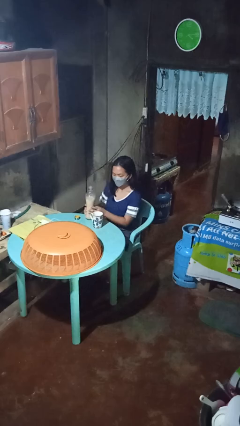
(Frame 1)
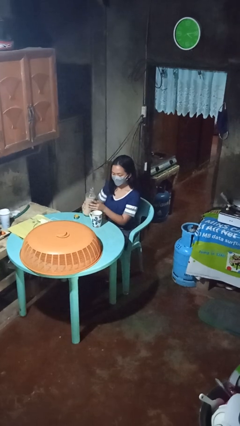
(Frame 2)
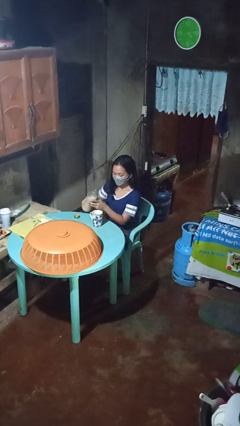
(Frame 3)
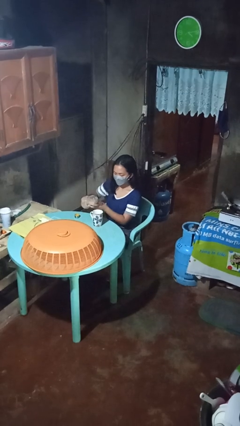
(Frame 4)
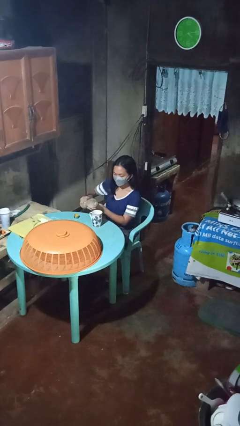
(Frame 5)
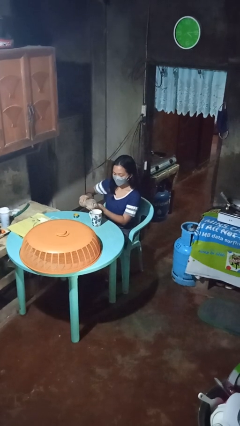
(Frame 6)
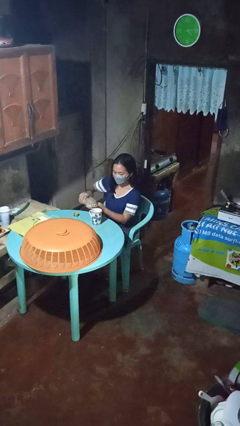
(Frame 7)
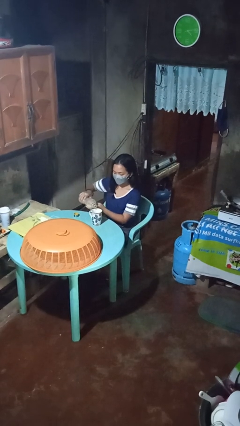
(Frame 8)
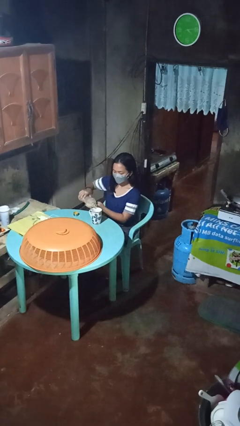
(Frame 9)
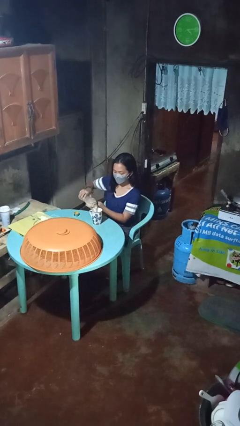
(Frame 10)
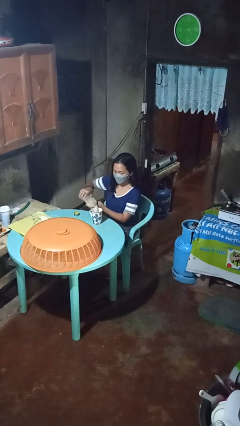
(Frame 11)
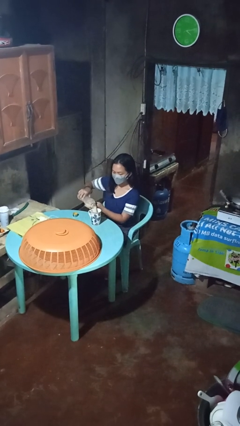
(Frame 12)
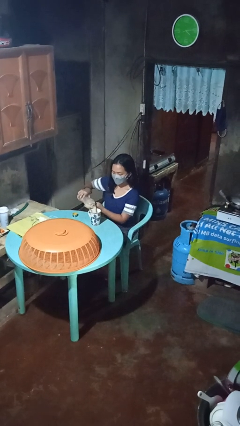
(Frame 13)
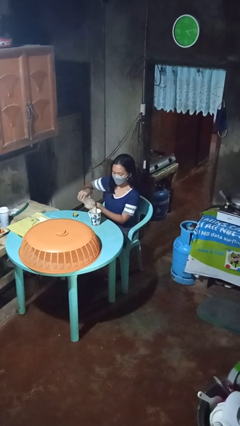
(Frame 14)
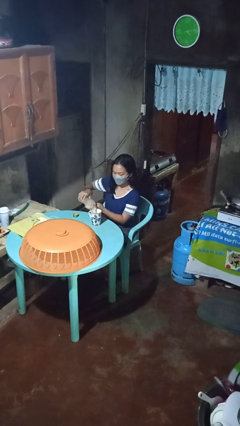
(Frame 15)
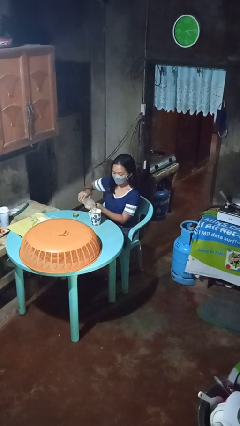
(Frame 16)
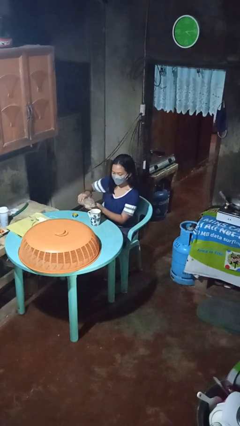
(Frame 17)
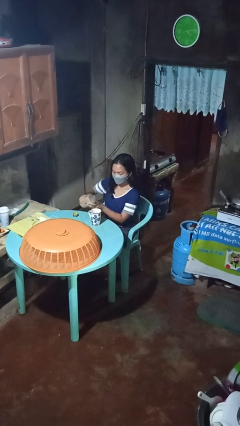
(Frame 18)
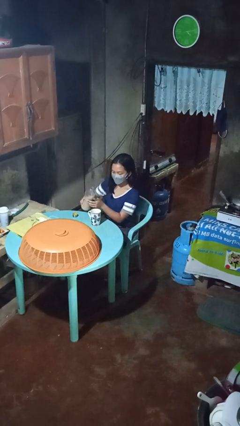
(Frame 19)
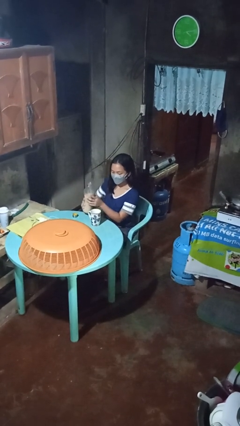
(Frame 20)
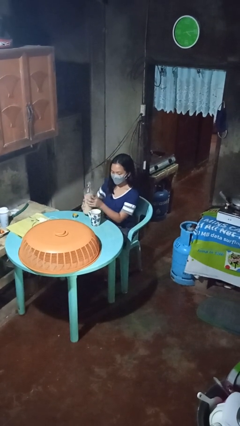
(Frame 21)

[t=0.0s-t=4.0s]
person pours coffee into mug

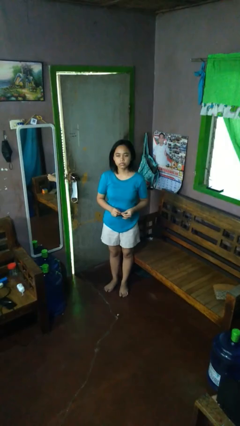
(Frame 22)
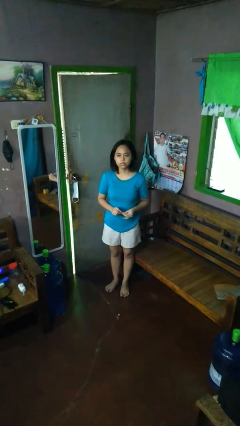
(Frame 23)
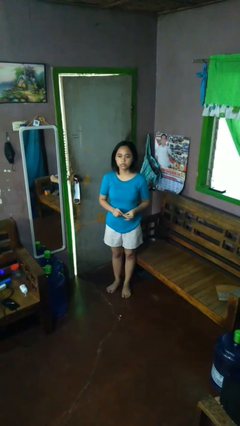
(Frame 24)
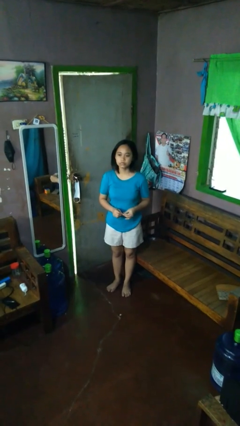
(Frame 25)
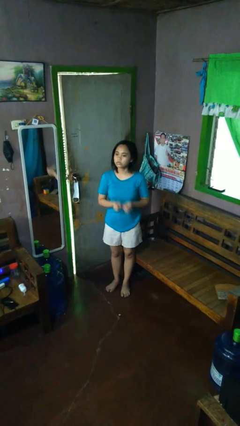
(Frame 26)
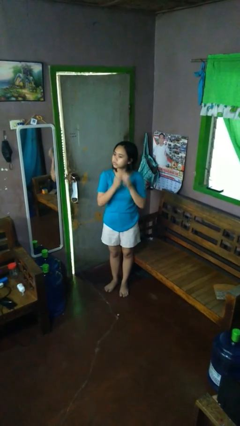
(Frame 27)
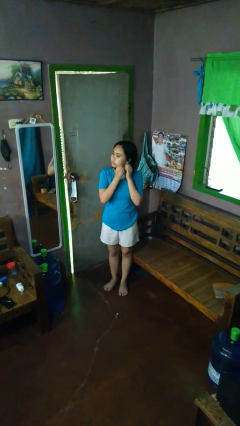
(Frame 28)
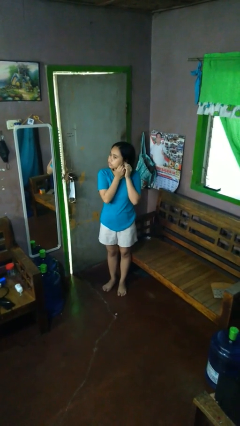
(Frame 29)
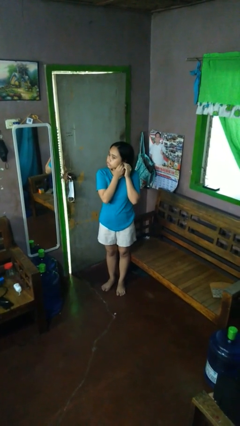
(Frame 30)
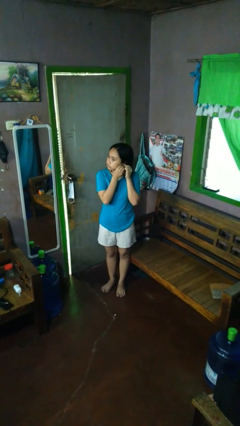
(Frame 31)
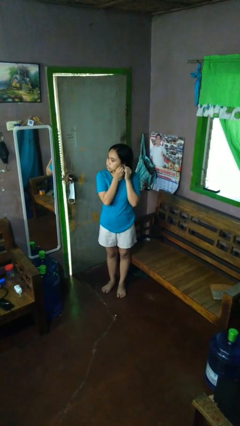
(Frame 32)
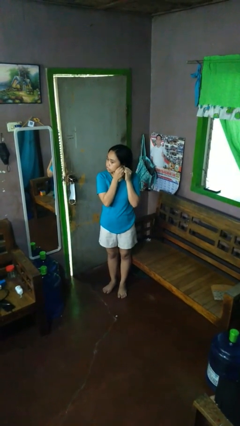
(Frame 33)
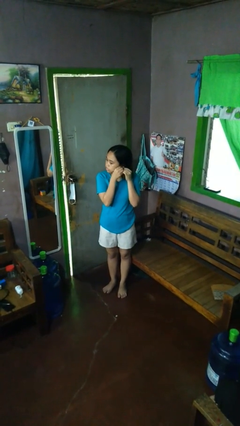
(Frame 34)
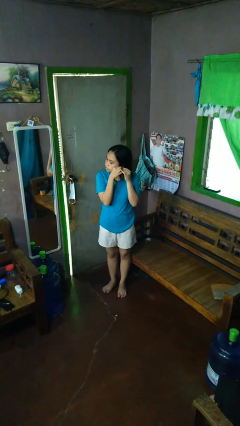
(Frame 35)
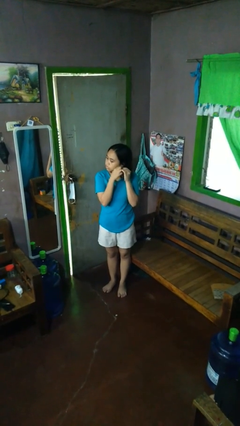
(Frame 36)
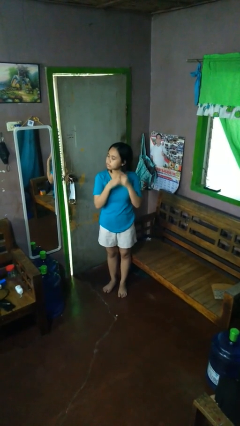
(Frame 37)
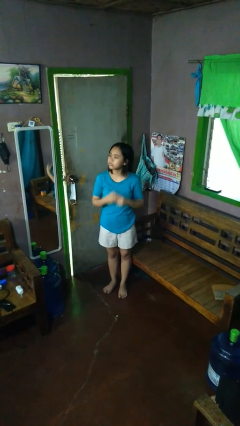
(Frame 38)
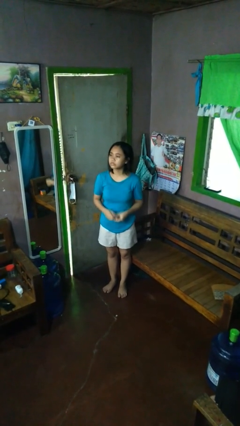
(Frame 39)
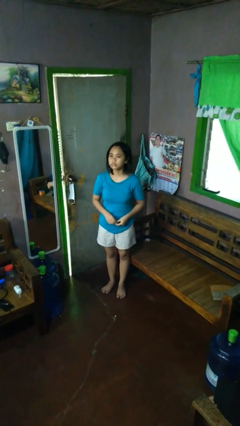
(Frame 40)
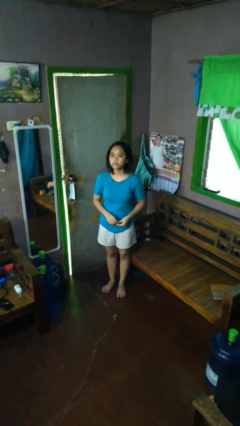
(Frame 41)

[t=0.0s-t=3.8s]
person puts on earrings

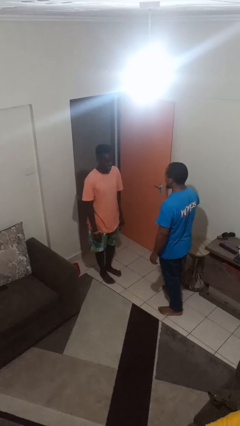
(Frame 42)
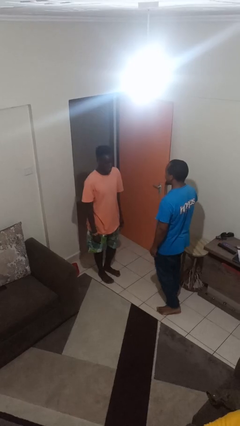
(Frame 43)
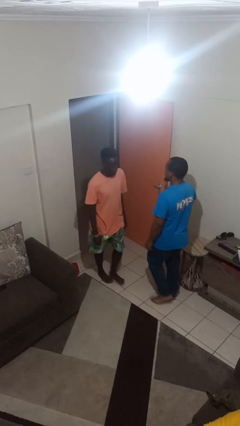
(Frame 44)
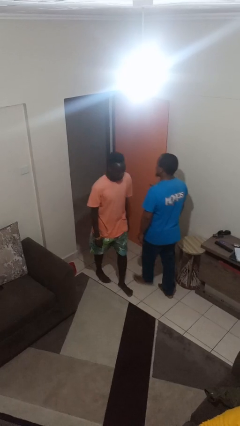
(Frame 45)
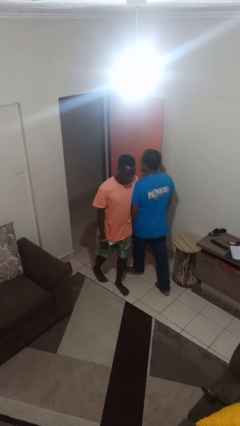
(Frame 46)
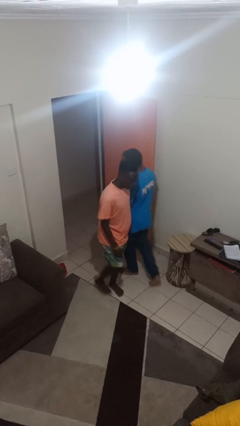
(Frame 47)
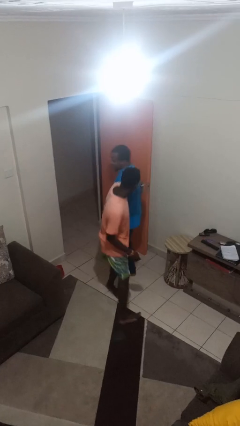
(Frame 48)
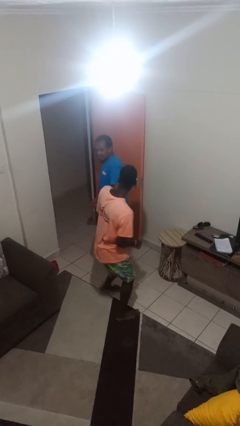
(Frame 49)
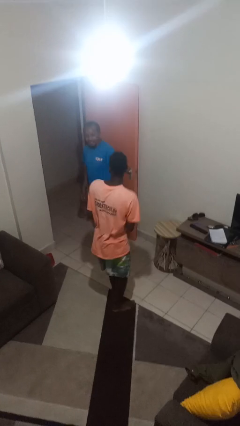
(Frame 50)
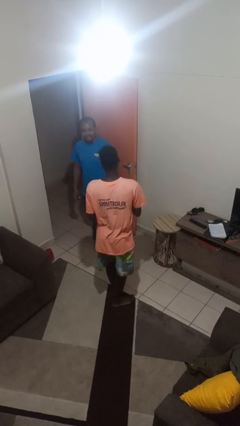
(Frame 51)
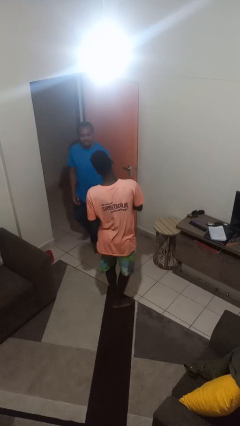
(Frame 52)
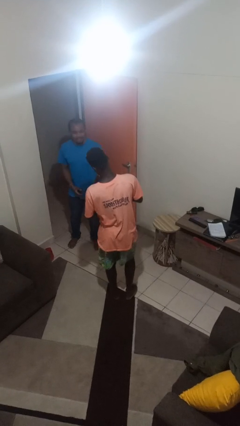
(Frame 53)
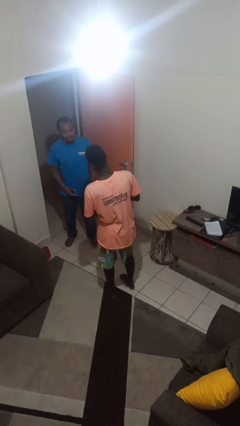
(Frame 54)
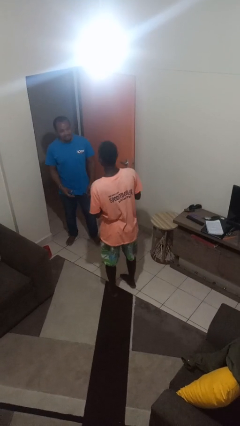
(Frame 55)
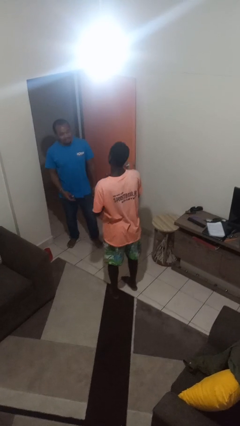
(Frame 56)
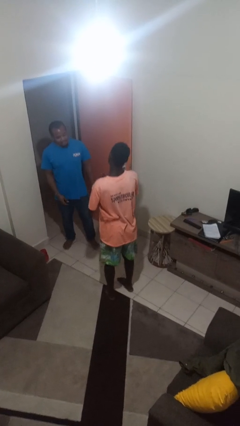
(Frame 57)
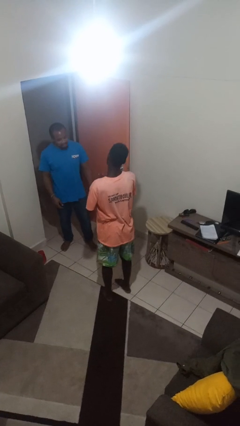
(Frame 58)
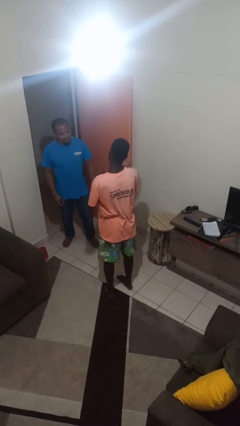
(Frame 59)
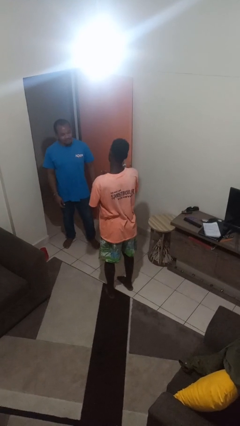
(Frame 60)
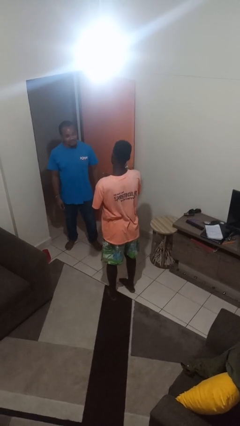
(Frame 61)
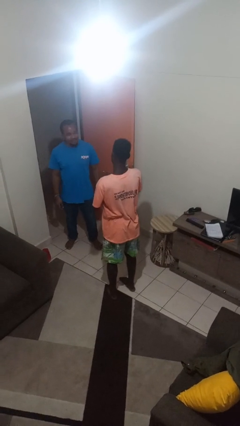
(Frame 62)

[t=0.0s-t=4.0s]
person bumps into person

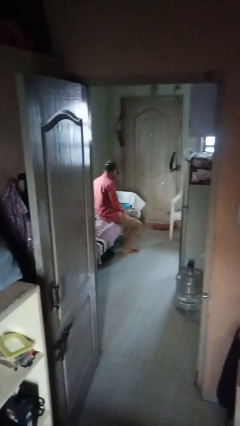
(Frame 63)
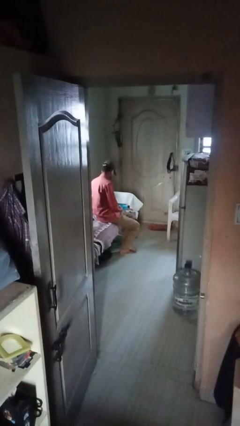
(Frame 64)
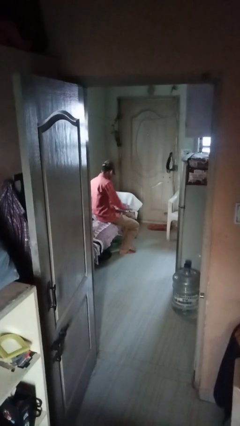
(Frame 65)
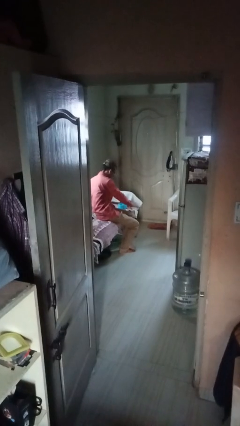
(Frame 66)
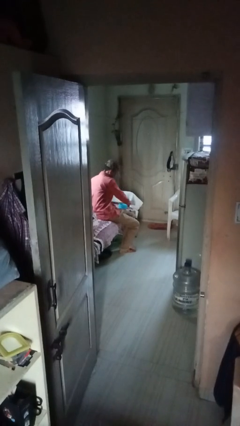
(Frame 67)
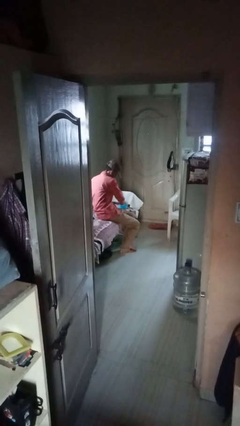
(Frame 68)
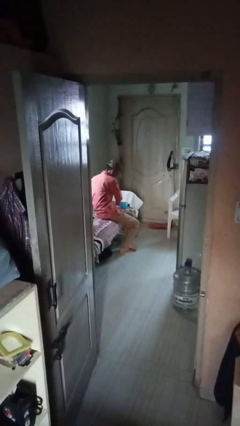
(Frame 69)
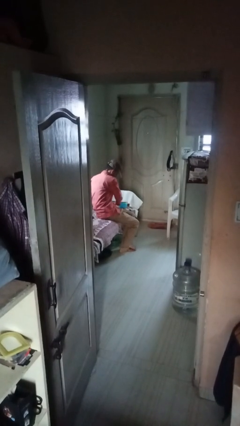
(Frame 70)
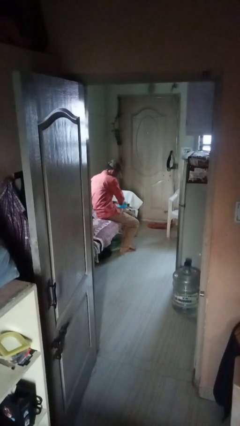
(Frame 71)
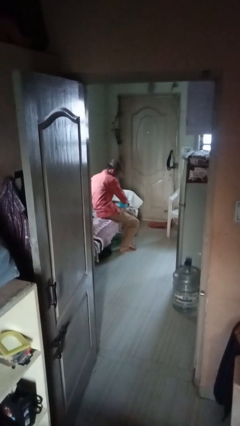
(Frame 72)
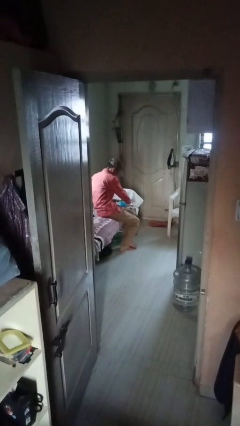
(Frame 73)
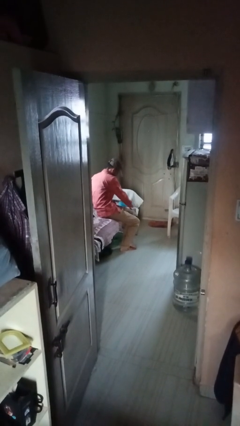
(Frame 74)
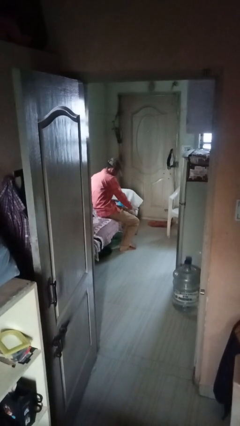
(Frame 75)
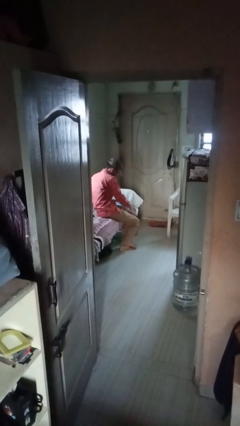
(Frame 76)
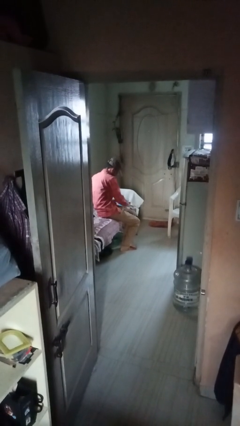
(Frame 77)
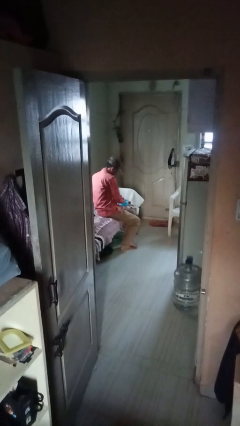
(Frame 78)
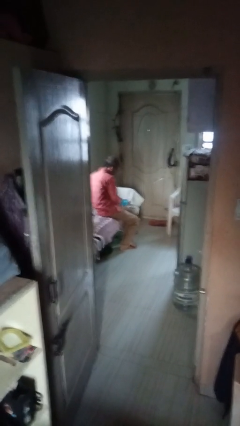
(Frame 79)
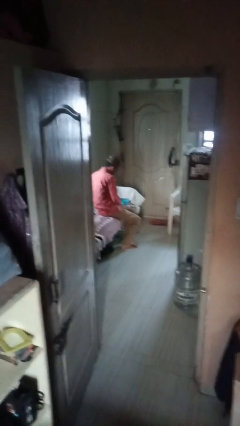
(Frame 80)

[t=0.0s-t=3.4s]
person waves hand over object

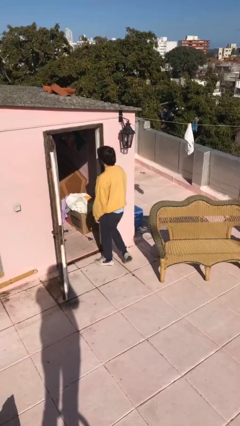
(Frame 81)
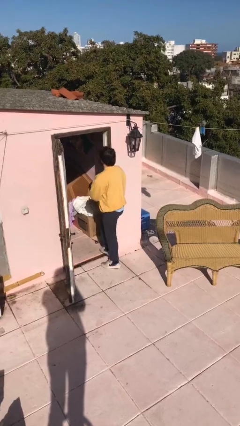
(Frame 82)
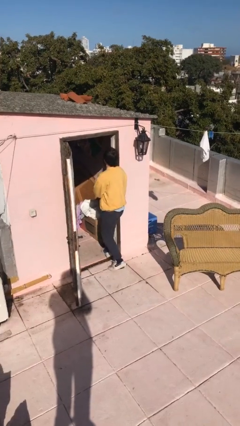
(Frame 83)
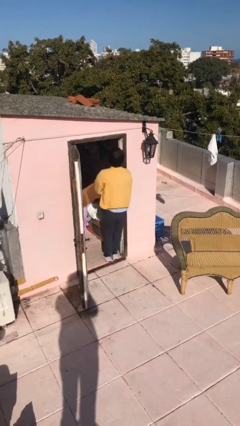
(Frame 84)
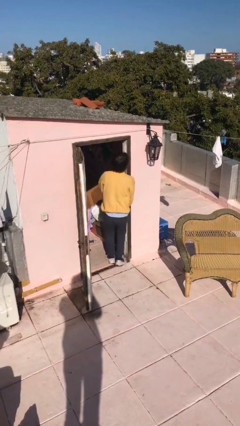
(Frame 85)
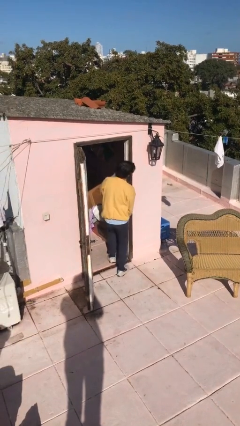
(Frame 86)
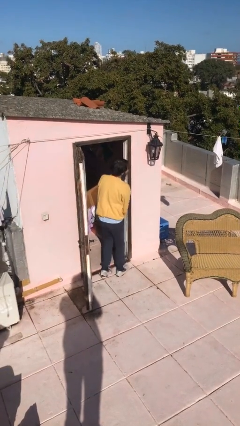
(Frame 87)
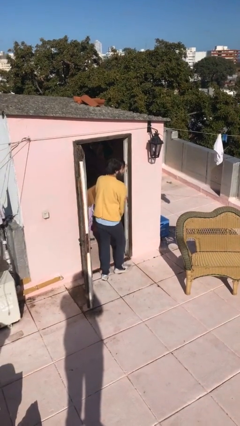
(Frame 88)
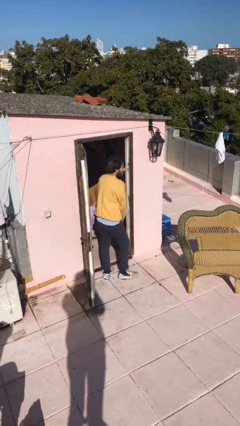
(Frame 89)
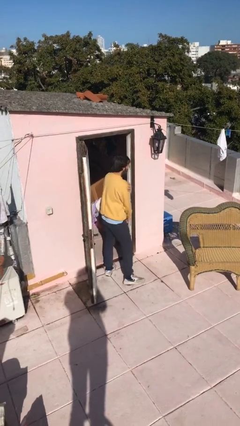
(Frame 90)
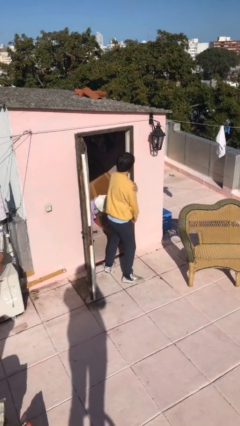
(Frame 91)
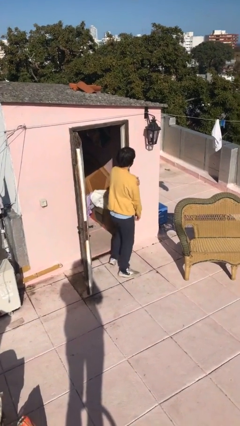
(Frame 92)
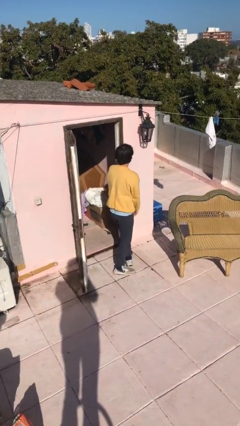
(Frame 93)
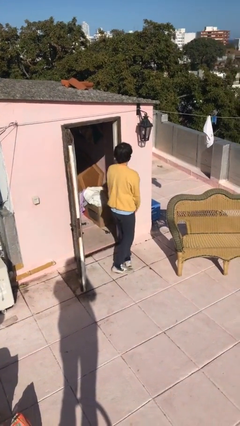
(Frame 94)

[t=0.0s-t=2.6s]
person bumps into wall
